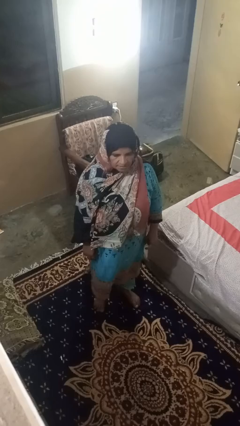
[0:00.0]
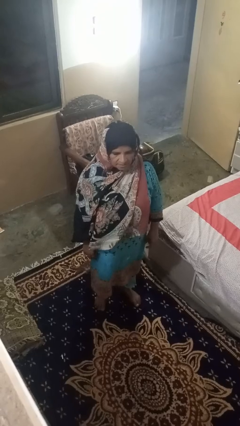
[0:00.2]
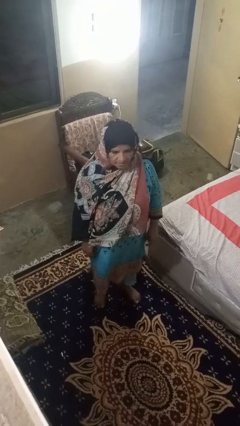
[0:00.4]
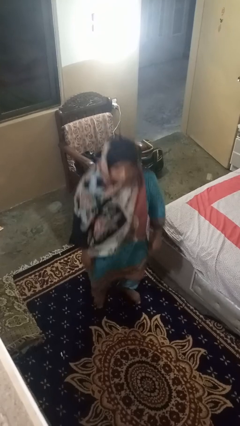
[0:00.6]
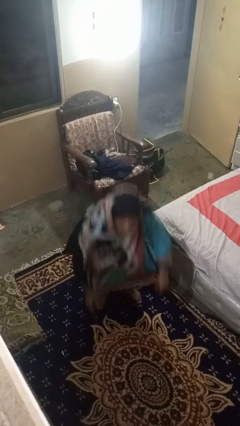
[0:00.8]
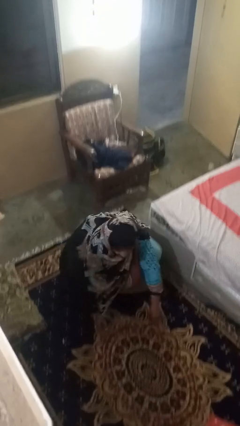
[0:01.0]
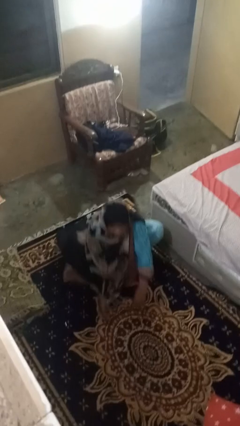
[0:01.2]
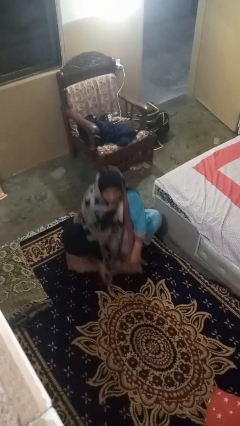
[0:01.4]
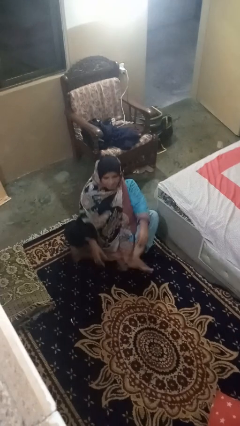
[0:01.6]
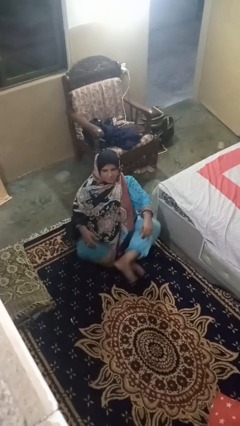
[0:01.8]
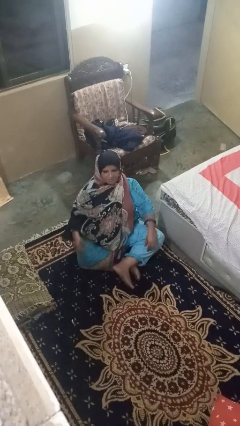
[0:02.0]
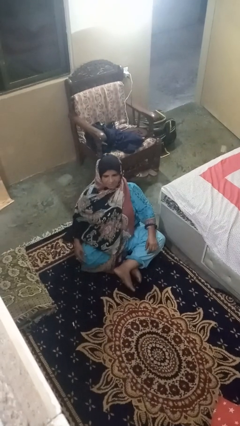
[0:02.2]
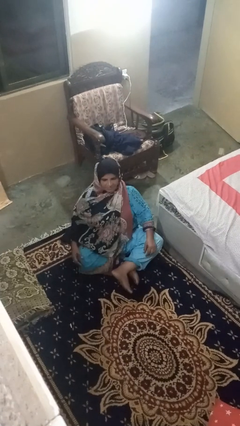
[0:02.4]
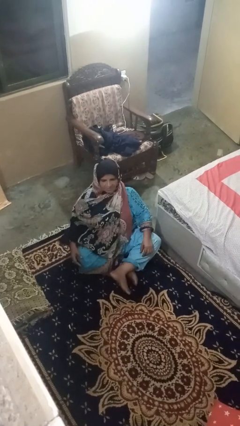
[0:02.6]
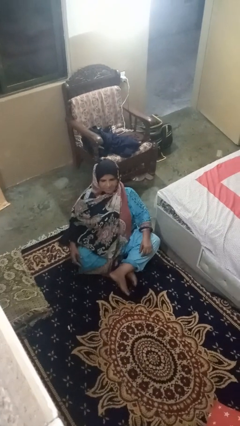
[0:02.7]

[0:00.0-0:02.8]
person sits crisscross

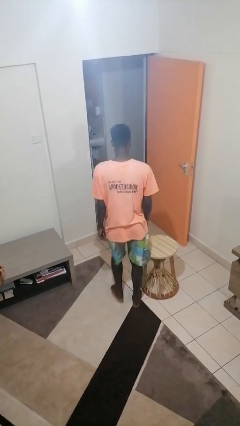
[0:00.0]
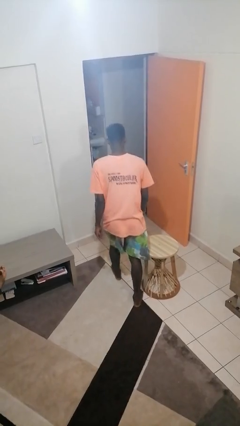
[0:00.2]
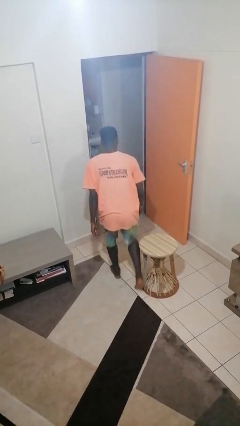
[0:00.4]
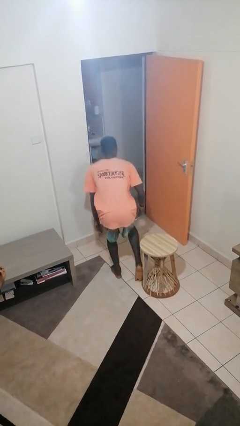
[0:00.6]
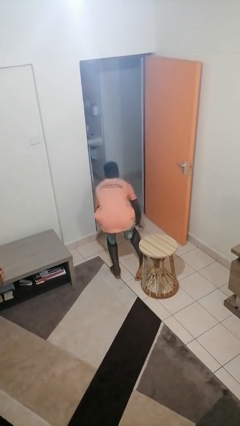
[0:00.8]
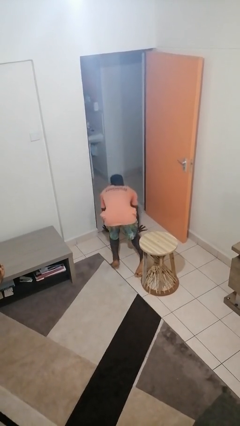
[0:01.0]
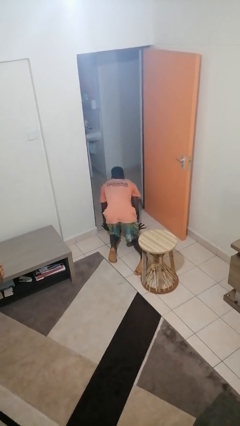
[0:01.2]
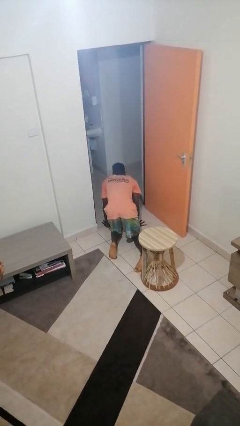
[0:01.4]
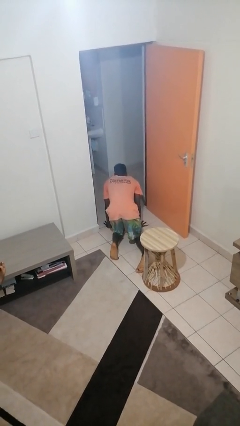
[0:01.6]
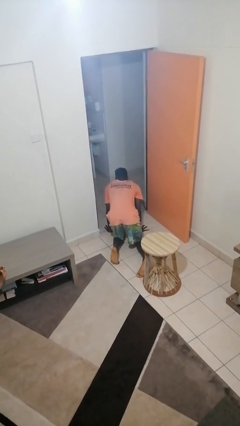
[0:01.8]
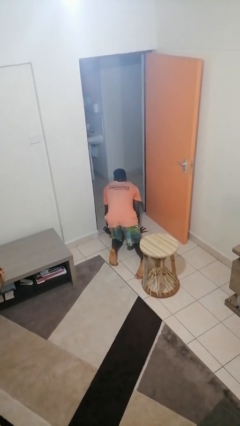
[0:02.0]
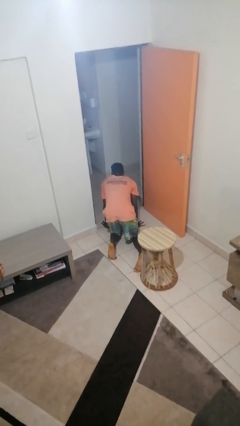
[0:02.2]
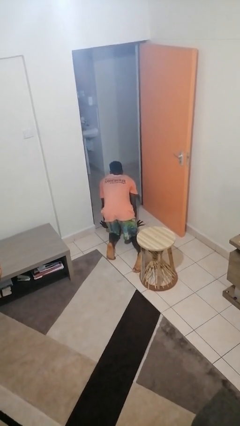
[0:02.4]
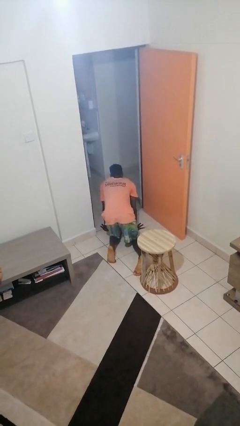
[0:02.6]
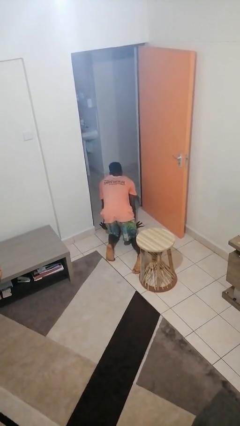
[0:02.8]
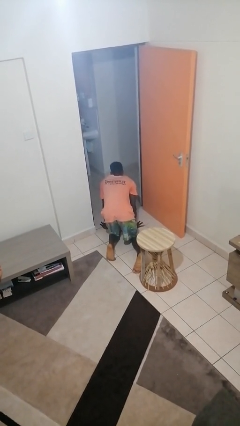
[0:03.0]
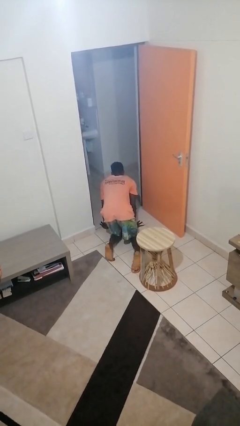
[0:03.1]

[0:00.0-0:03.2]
person trips on object on floor

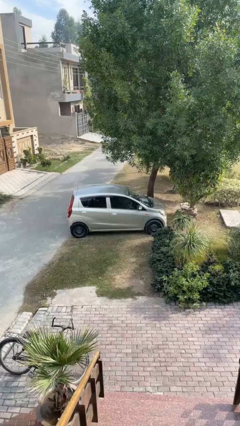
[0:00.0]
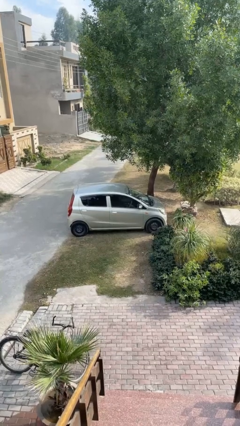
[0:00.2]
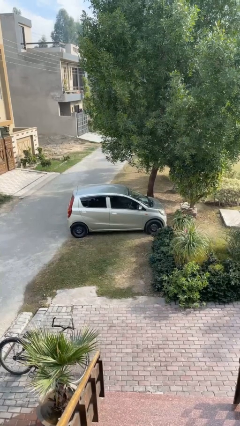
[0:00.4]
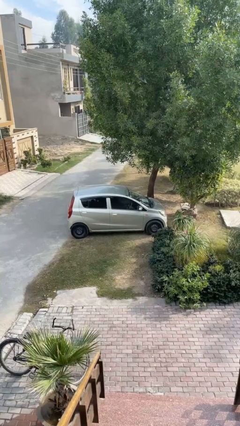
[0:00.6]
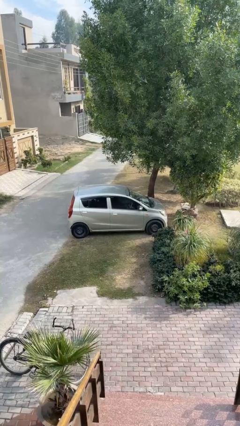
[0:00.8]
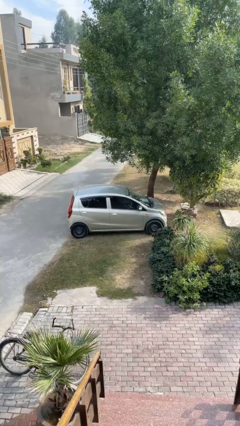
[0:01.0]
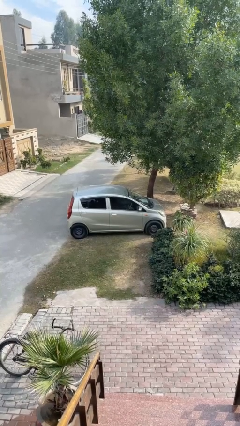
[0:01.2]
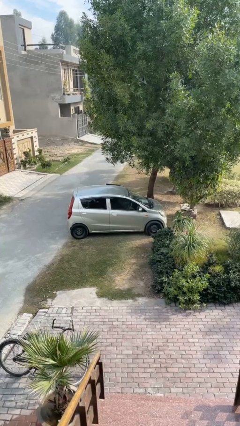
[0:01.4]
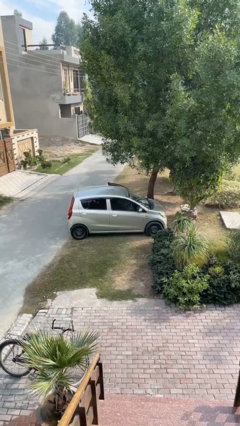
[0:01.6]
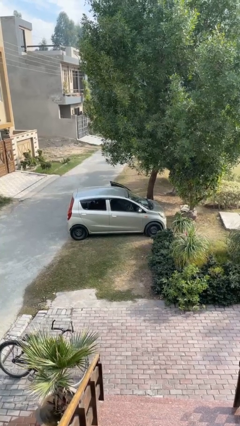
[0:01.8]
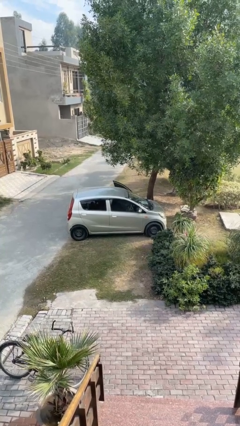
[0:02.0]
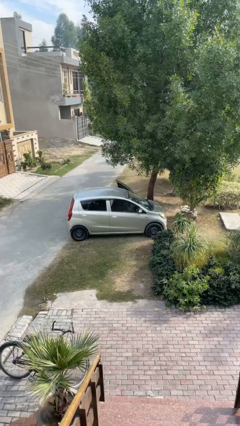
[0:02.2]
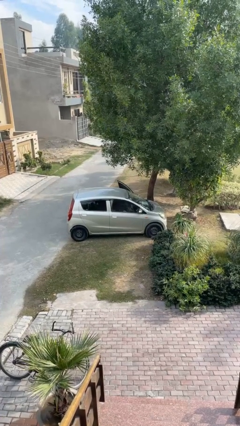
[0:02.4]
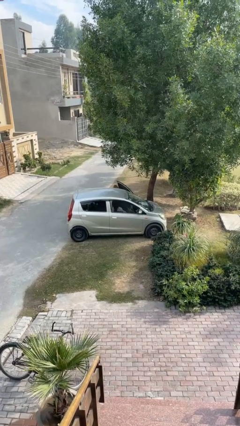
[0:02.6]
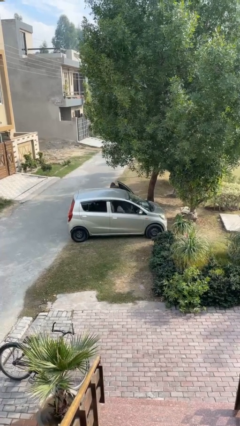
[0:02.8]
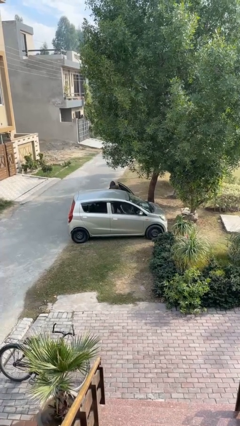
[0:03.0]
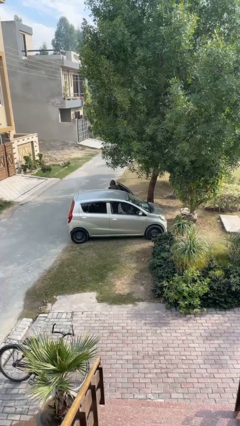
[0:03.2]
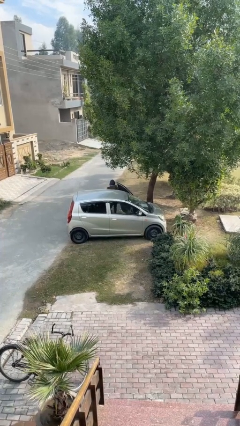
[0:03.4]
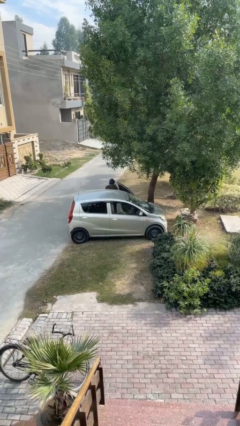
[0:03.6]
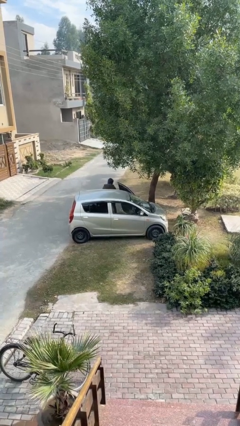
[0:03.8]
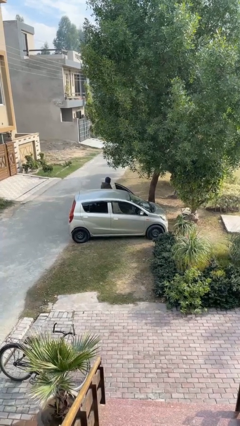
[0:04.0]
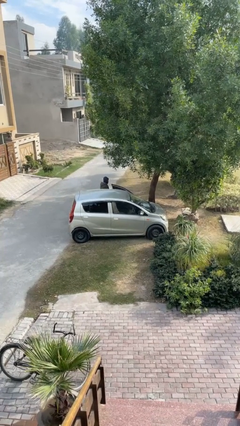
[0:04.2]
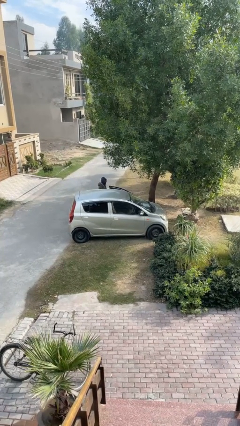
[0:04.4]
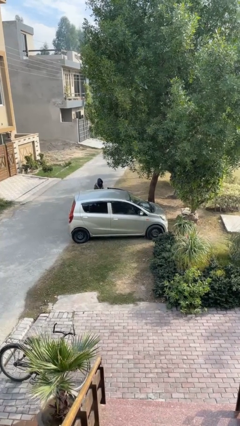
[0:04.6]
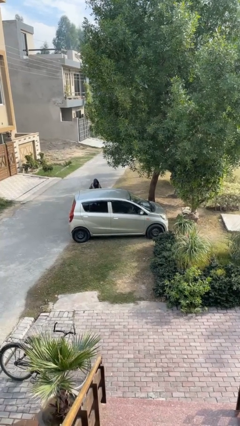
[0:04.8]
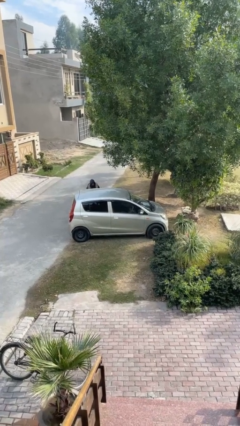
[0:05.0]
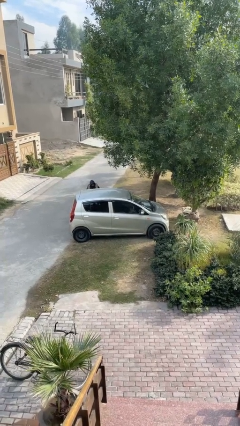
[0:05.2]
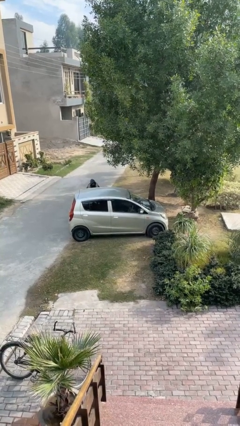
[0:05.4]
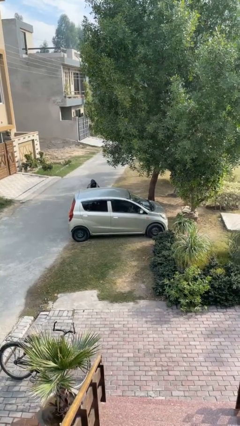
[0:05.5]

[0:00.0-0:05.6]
car drops off person

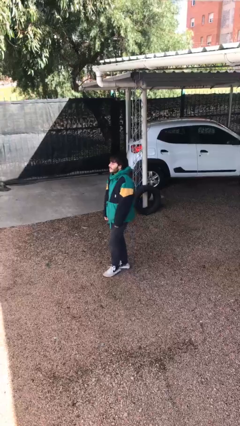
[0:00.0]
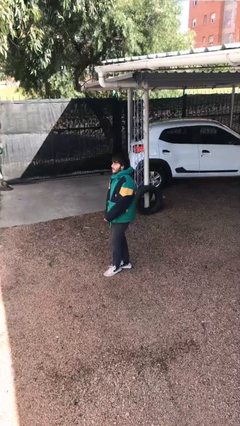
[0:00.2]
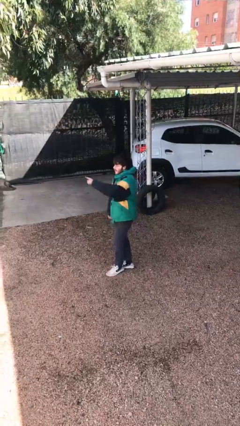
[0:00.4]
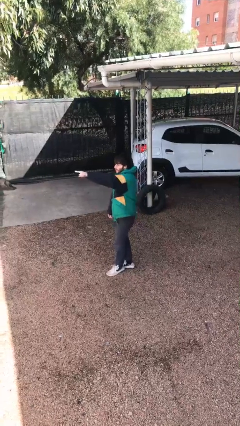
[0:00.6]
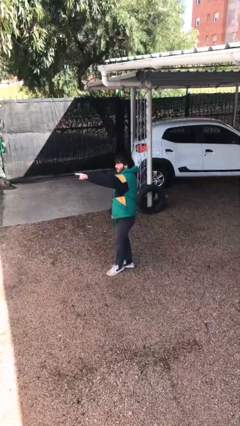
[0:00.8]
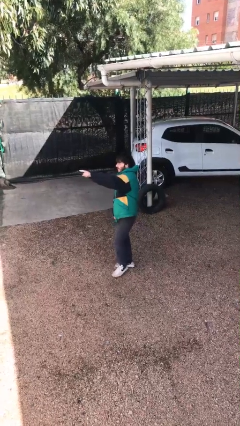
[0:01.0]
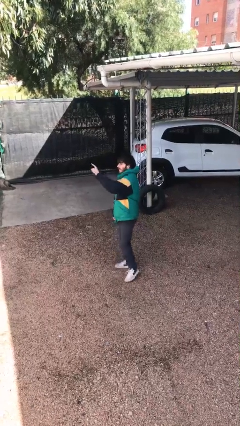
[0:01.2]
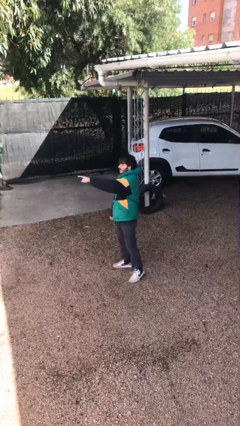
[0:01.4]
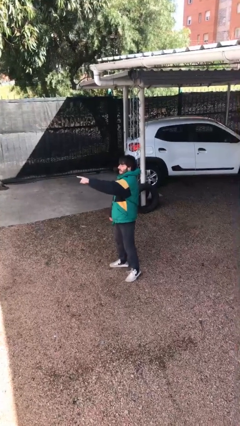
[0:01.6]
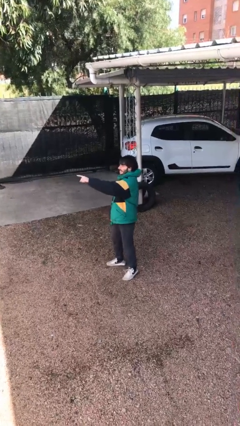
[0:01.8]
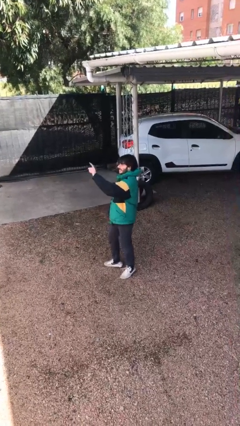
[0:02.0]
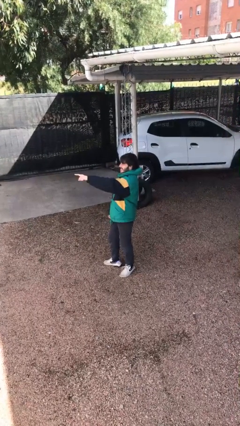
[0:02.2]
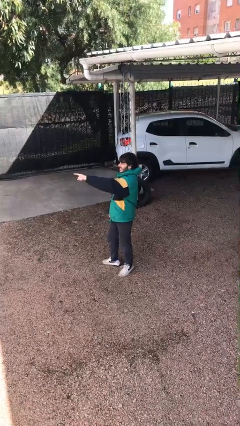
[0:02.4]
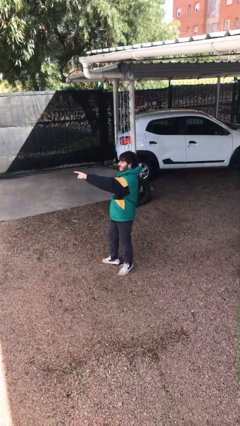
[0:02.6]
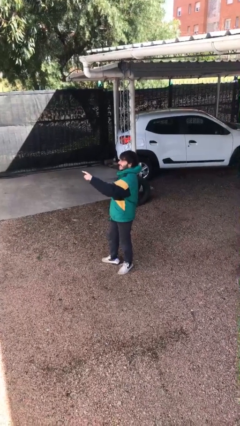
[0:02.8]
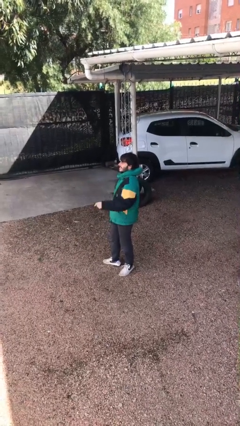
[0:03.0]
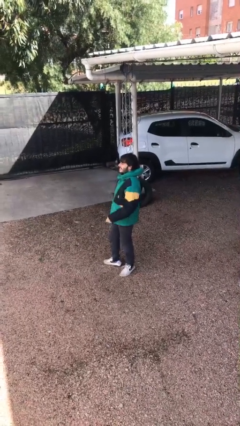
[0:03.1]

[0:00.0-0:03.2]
person points at person

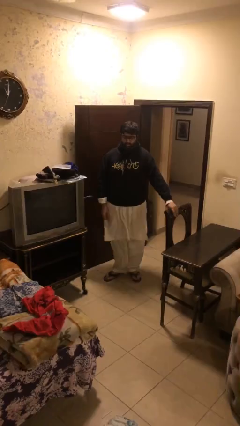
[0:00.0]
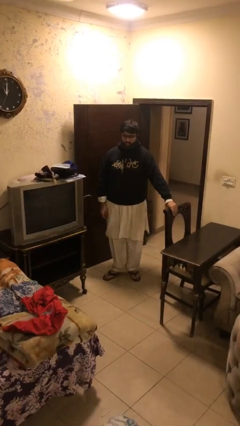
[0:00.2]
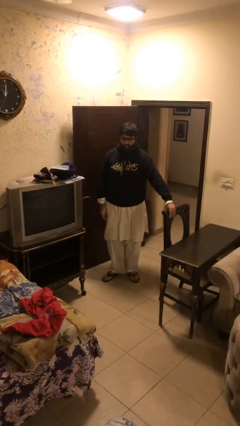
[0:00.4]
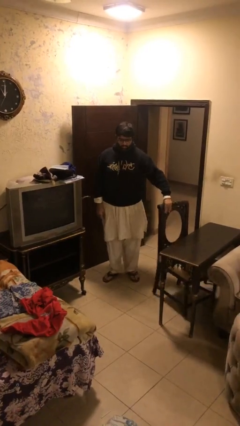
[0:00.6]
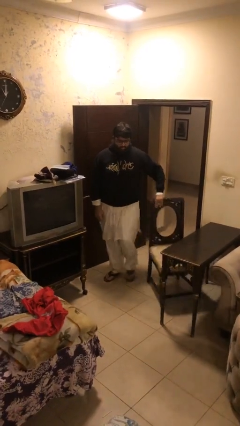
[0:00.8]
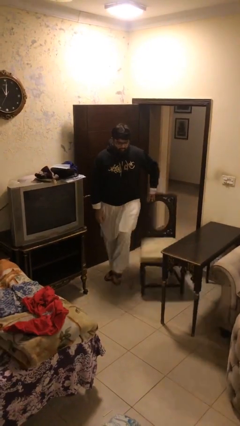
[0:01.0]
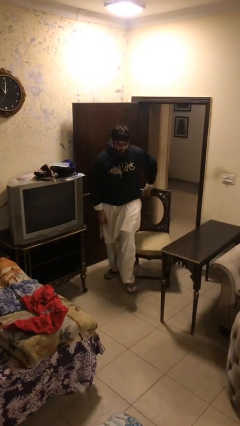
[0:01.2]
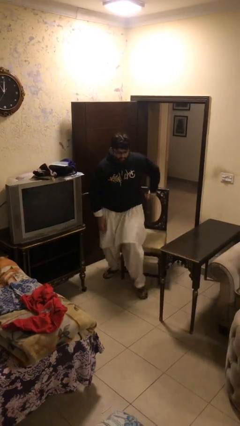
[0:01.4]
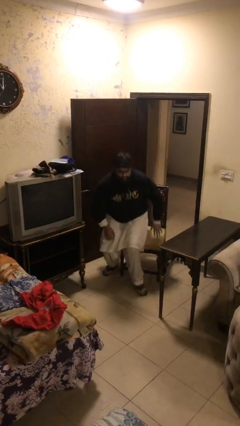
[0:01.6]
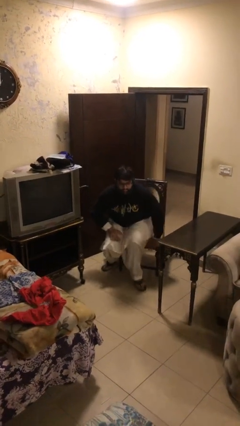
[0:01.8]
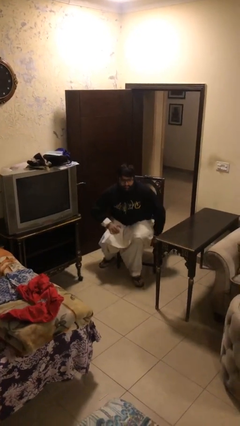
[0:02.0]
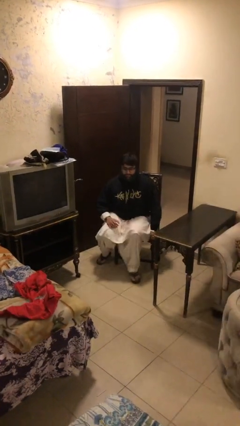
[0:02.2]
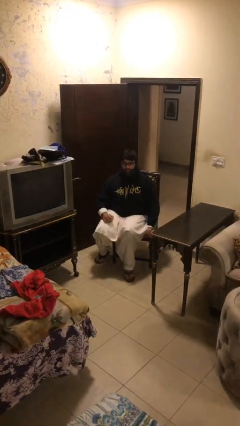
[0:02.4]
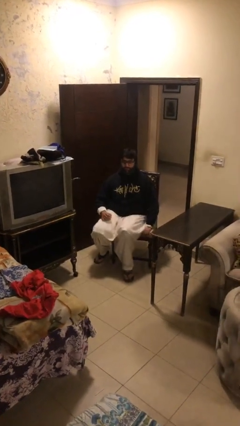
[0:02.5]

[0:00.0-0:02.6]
person sits down
